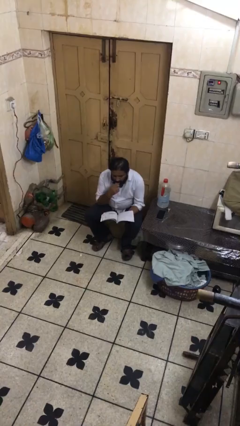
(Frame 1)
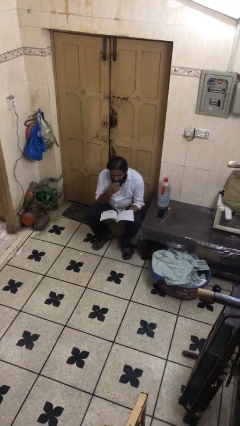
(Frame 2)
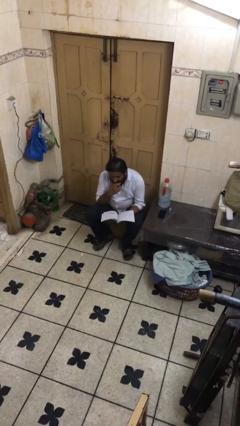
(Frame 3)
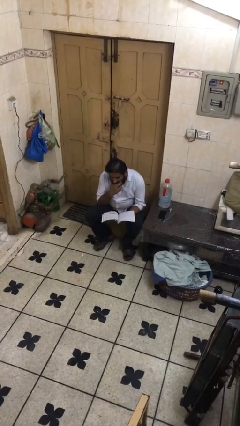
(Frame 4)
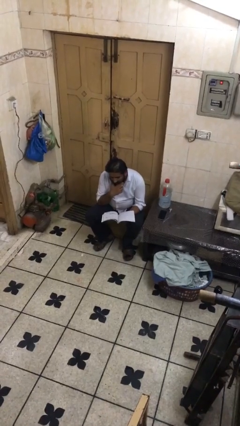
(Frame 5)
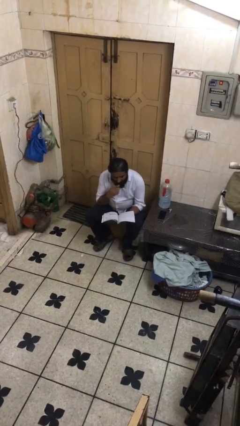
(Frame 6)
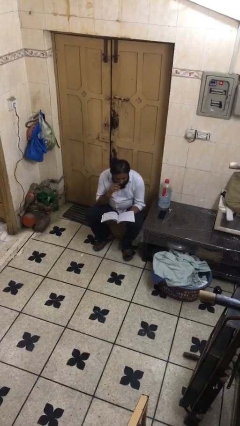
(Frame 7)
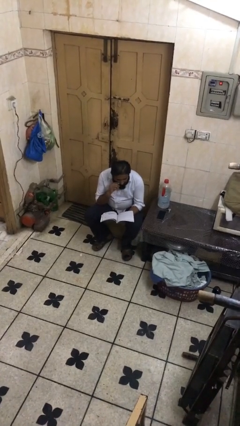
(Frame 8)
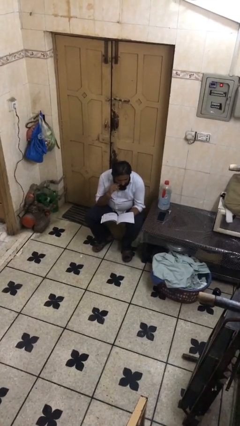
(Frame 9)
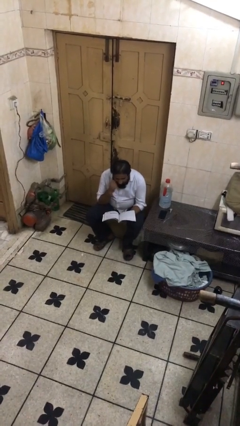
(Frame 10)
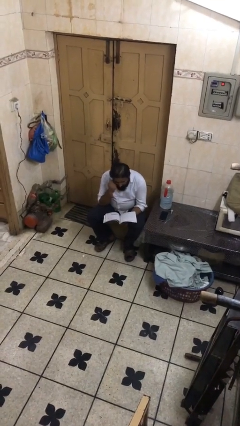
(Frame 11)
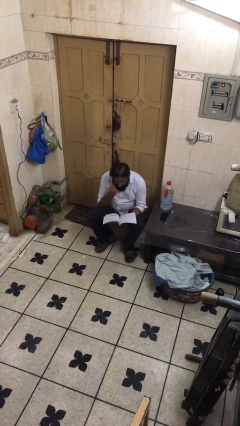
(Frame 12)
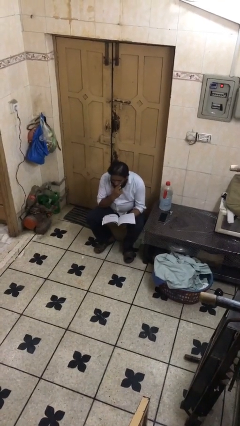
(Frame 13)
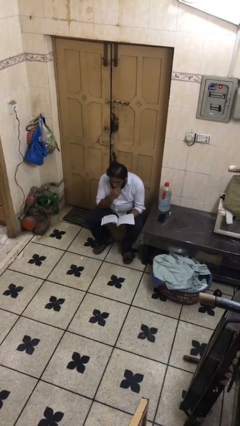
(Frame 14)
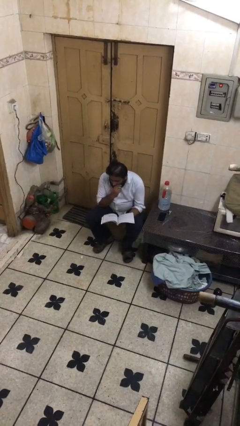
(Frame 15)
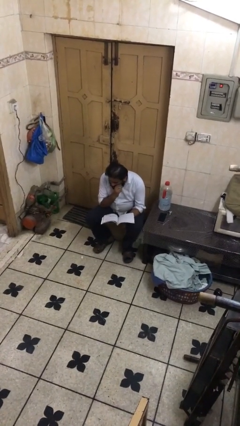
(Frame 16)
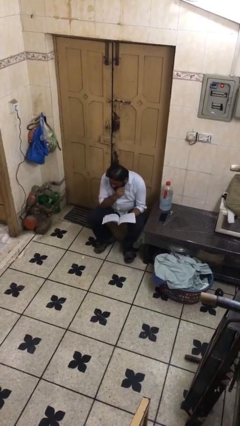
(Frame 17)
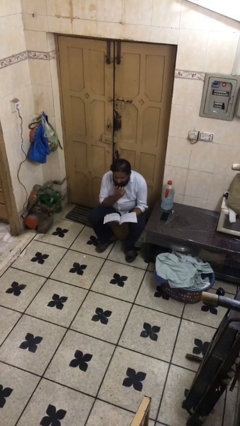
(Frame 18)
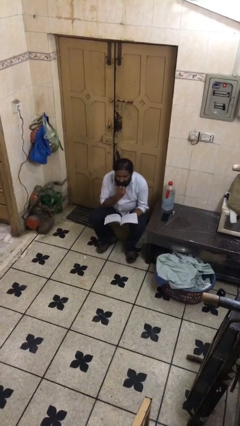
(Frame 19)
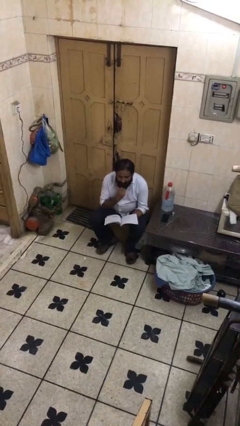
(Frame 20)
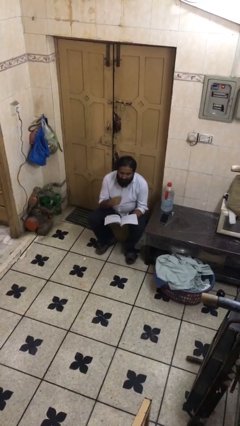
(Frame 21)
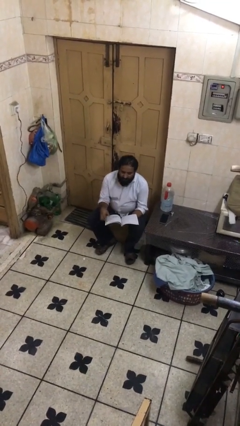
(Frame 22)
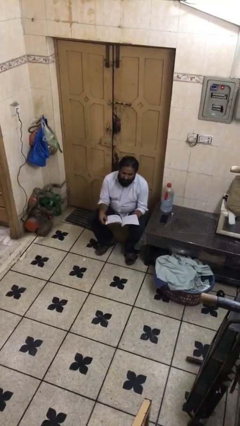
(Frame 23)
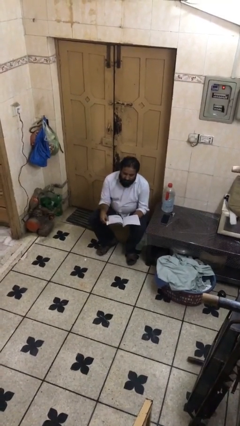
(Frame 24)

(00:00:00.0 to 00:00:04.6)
person reads document

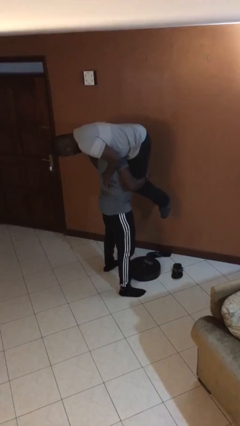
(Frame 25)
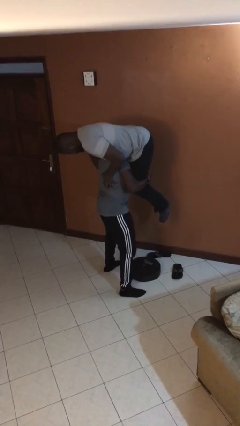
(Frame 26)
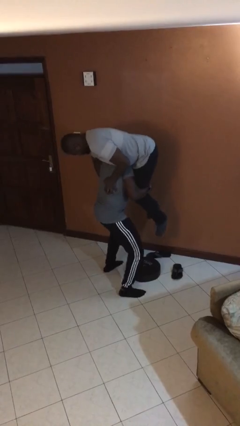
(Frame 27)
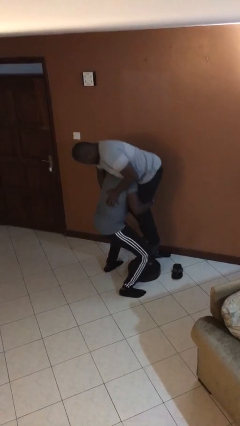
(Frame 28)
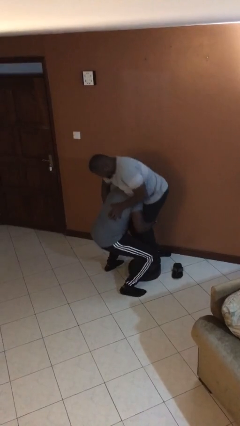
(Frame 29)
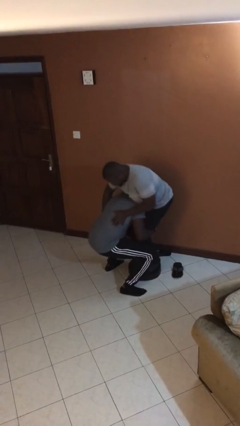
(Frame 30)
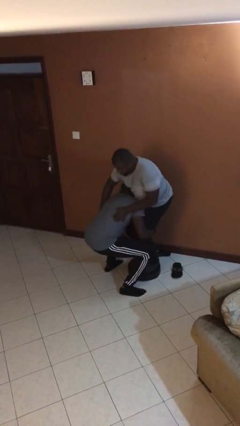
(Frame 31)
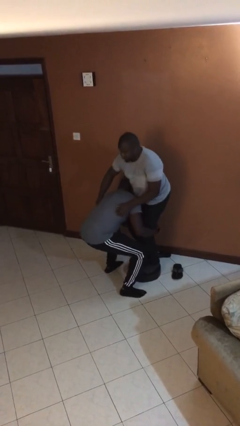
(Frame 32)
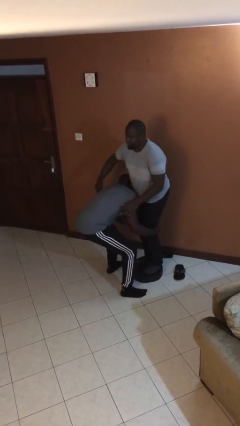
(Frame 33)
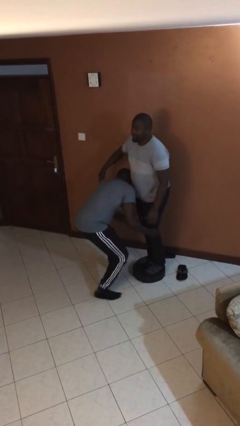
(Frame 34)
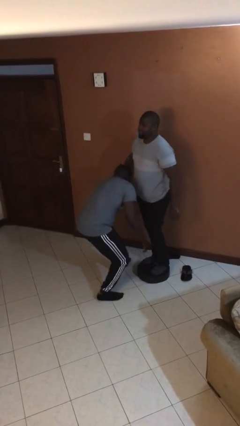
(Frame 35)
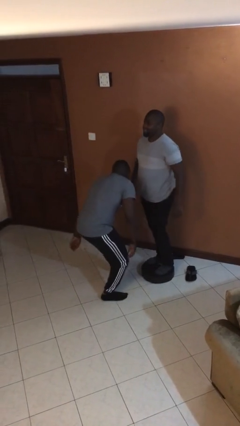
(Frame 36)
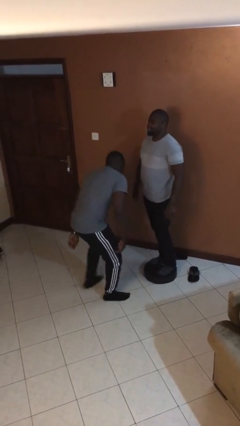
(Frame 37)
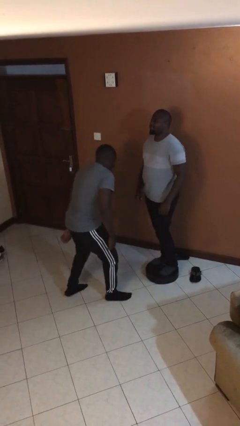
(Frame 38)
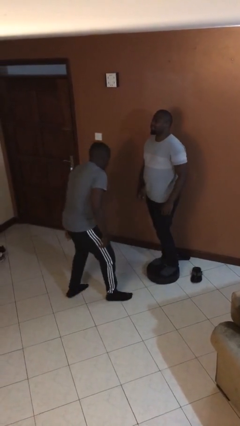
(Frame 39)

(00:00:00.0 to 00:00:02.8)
person puts down person

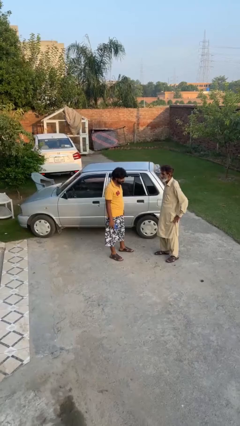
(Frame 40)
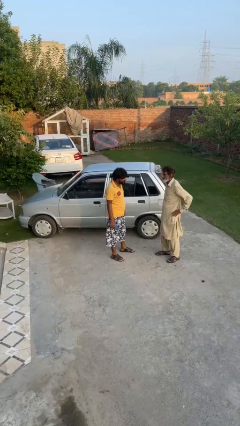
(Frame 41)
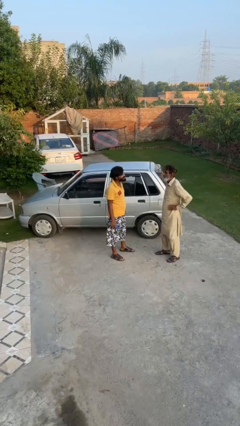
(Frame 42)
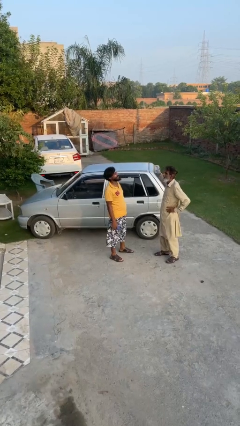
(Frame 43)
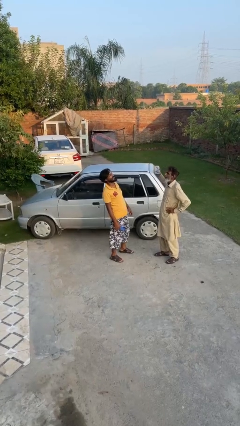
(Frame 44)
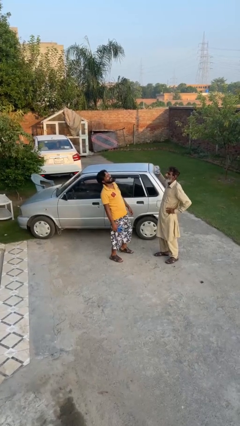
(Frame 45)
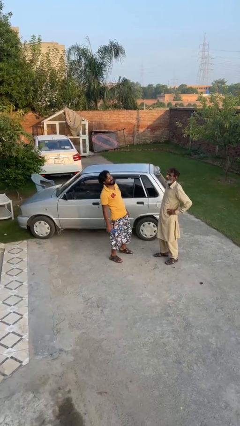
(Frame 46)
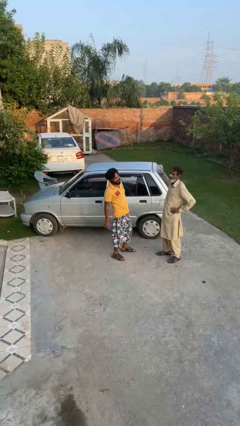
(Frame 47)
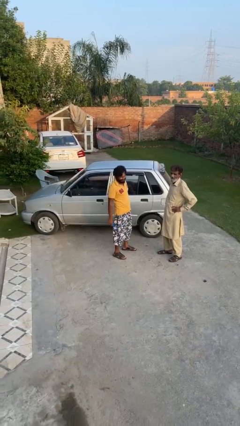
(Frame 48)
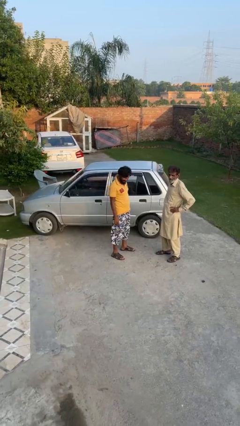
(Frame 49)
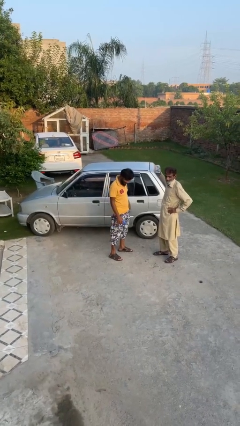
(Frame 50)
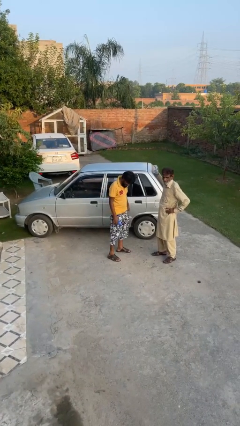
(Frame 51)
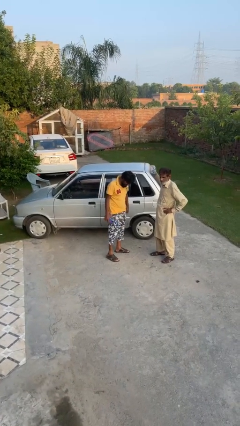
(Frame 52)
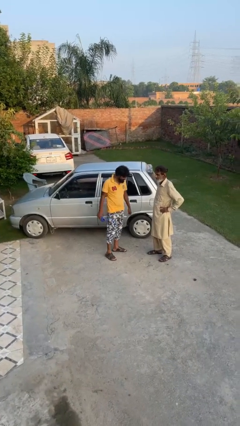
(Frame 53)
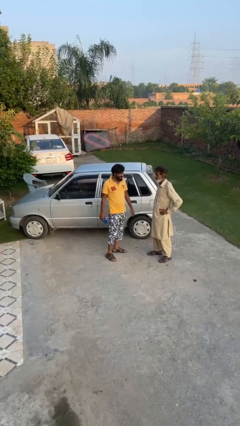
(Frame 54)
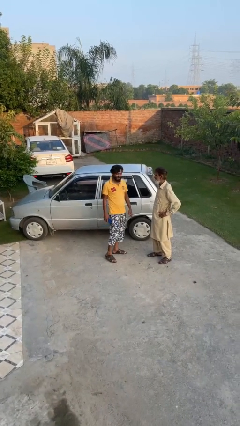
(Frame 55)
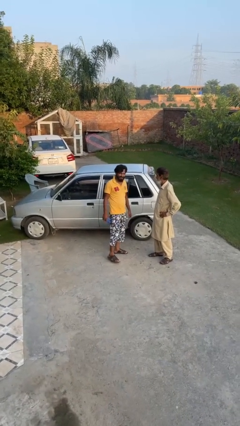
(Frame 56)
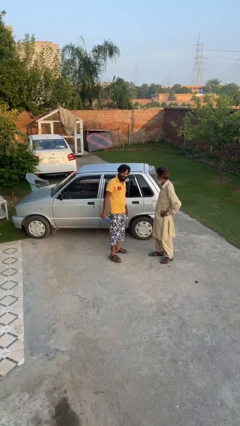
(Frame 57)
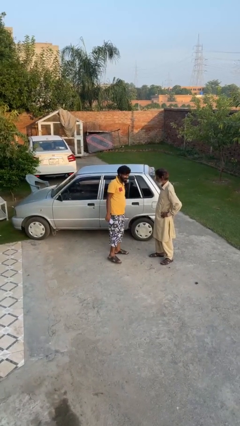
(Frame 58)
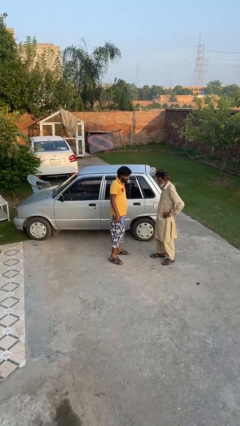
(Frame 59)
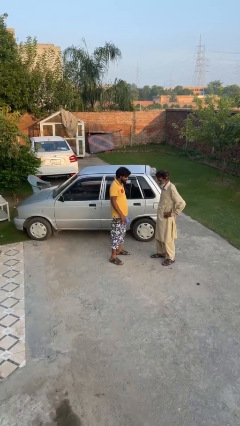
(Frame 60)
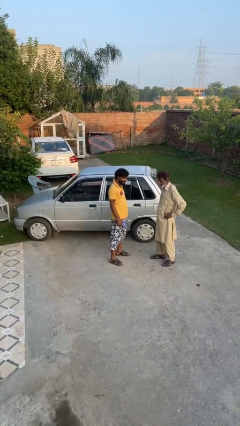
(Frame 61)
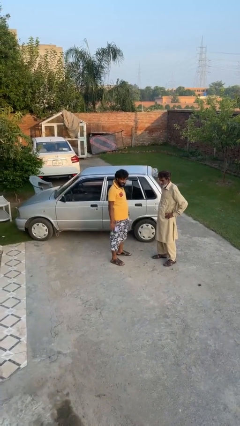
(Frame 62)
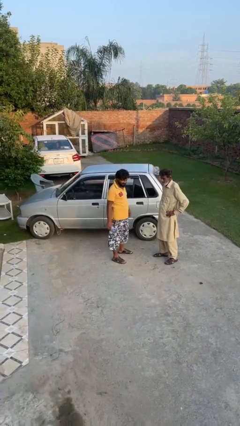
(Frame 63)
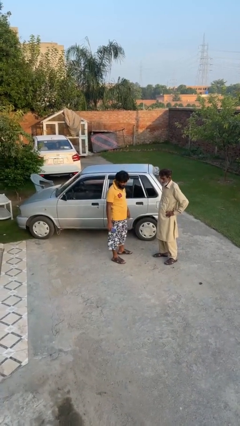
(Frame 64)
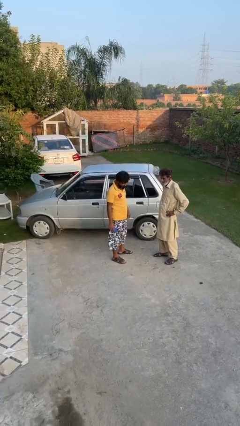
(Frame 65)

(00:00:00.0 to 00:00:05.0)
person laughs with person

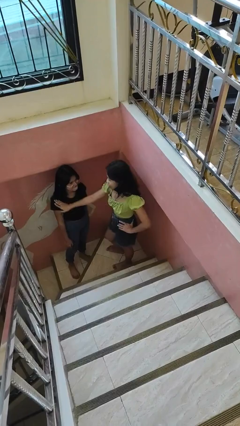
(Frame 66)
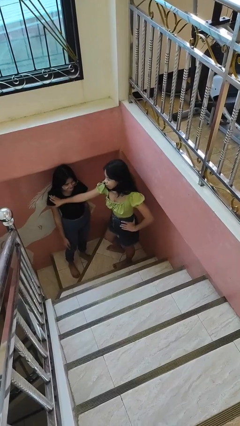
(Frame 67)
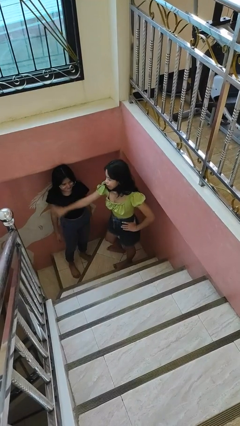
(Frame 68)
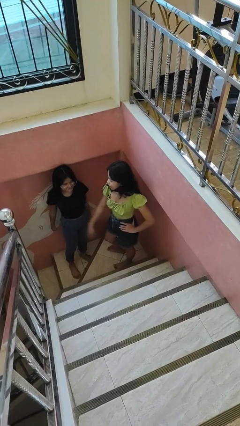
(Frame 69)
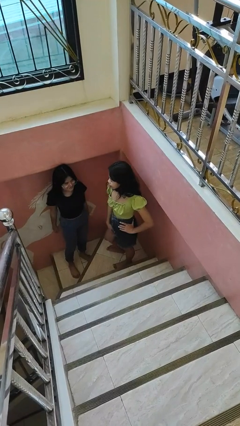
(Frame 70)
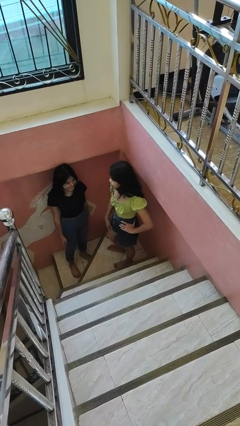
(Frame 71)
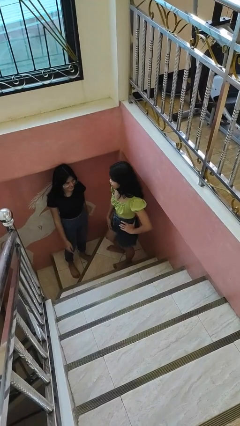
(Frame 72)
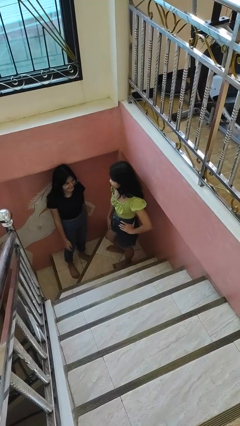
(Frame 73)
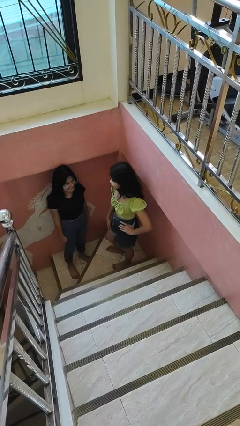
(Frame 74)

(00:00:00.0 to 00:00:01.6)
person shoves person

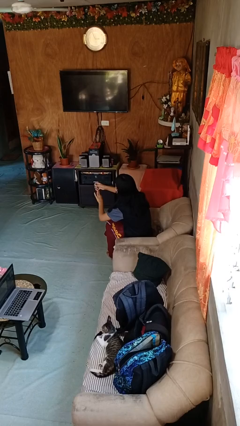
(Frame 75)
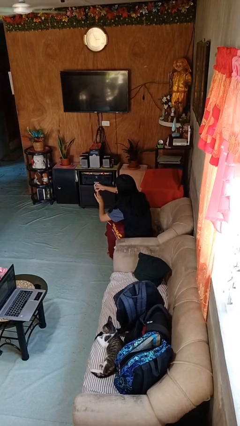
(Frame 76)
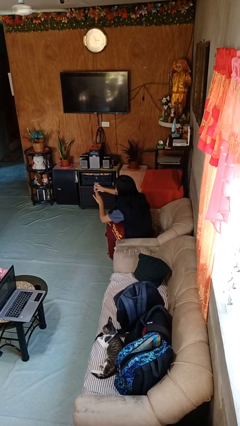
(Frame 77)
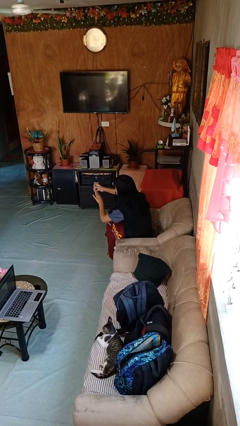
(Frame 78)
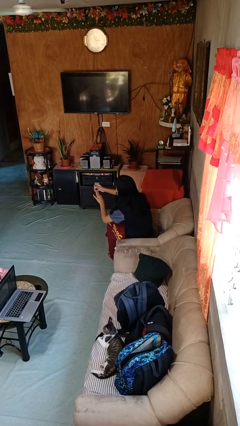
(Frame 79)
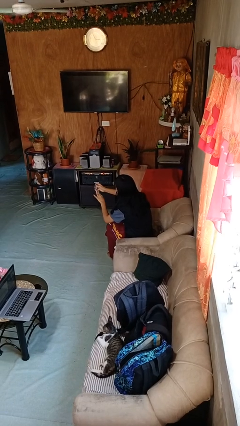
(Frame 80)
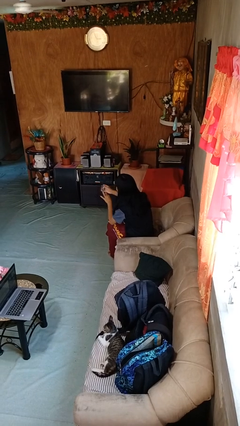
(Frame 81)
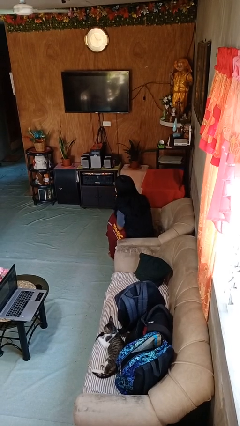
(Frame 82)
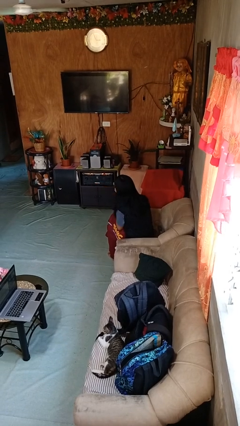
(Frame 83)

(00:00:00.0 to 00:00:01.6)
person clips fingernails

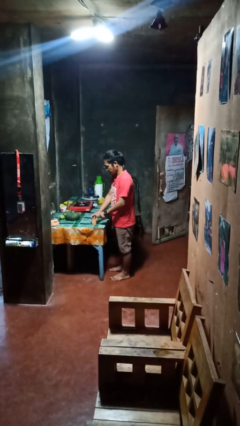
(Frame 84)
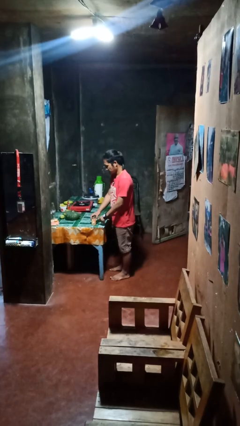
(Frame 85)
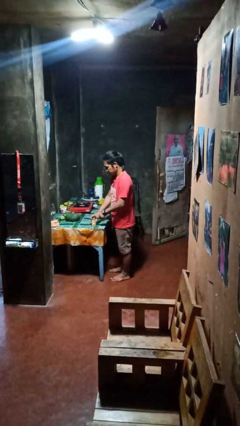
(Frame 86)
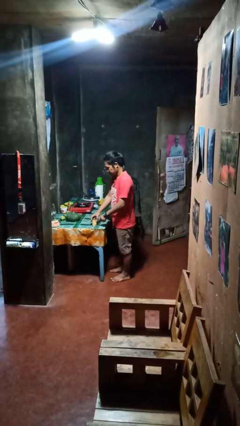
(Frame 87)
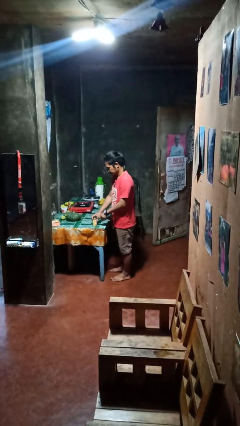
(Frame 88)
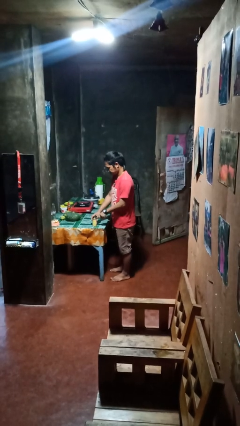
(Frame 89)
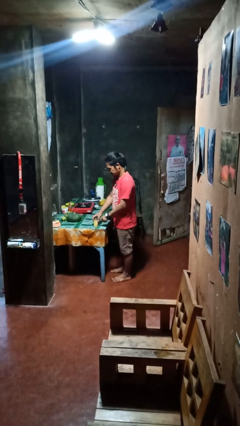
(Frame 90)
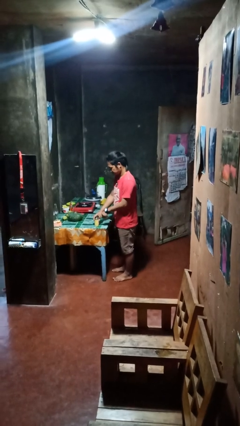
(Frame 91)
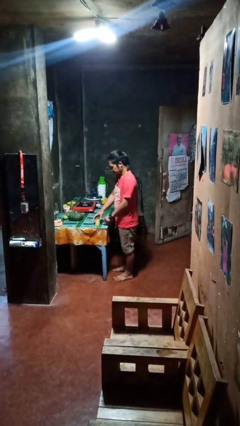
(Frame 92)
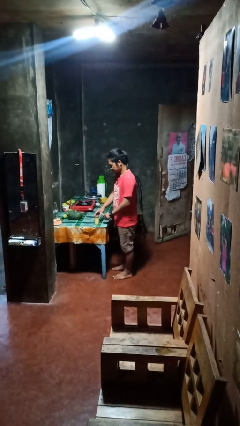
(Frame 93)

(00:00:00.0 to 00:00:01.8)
person opens can with can opener
